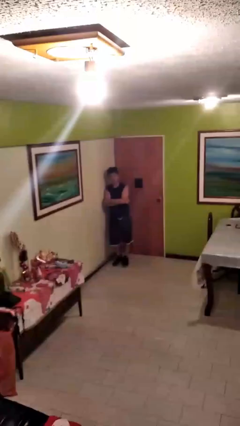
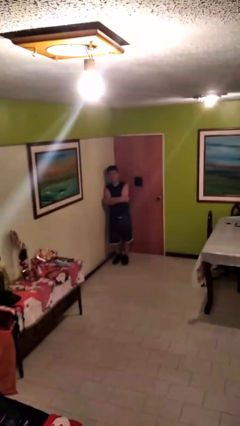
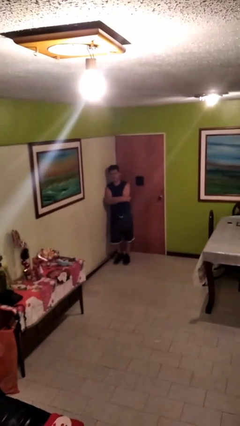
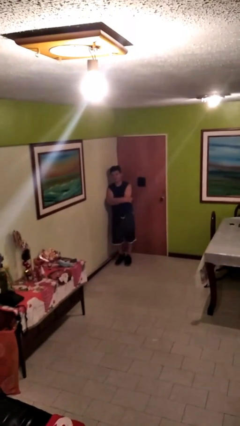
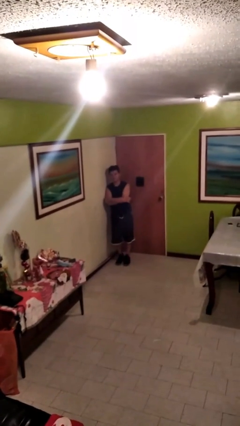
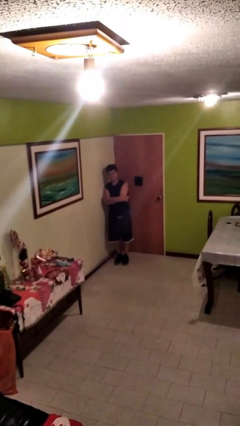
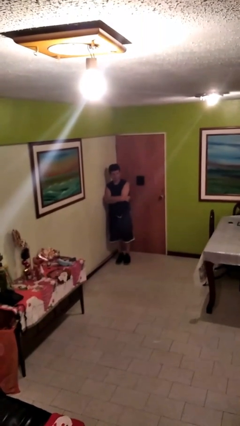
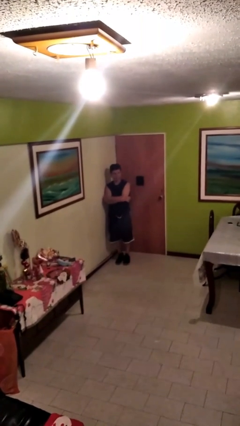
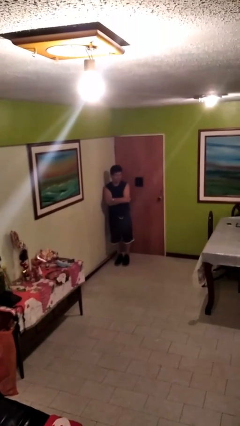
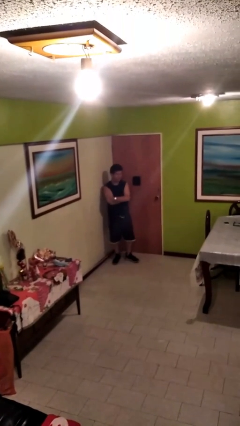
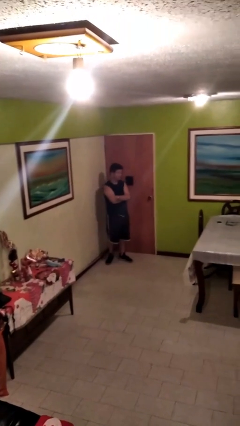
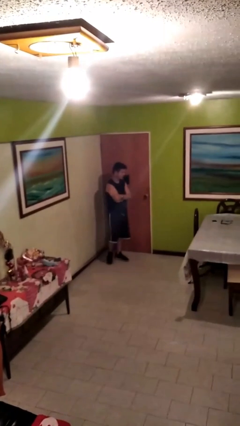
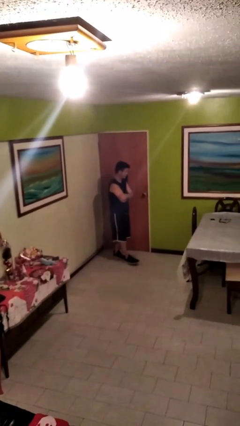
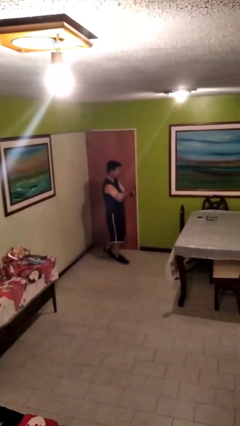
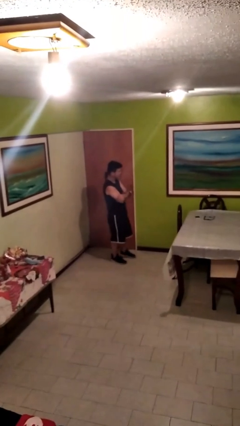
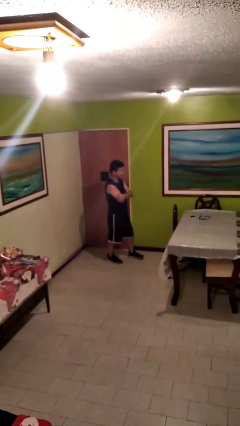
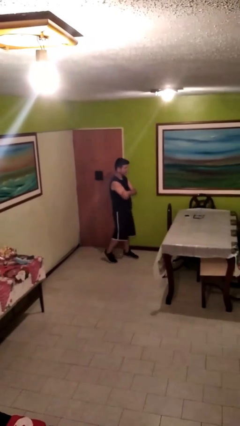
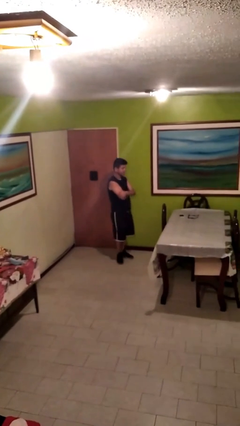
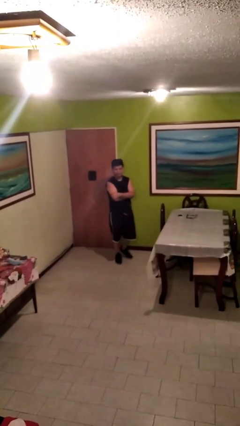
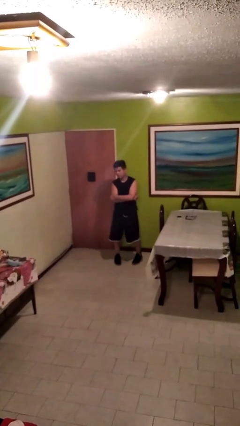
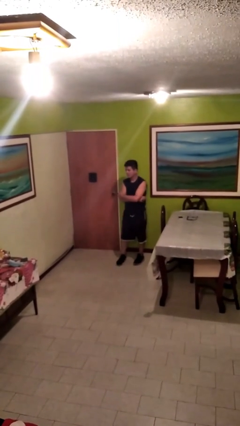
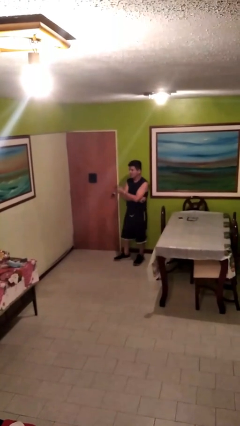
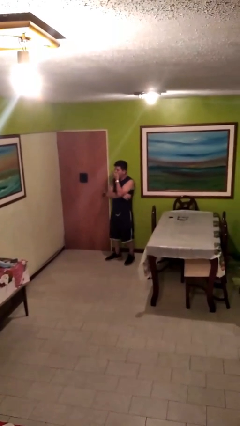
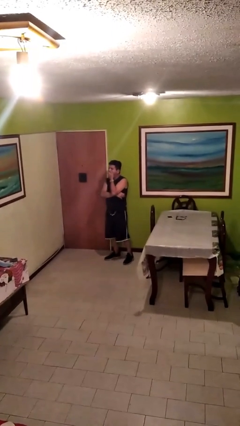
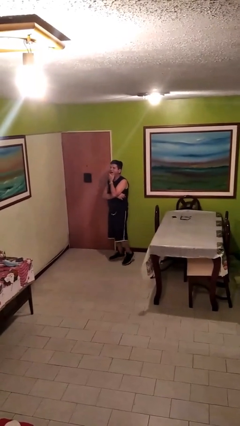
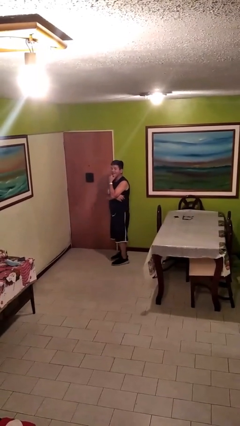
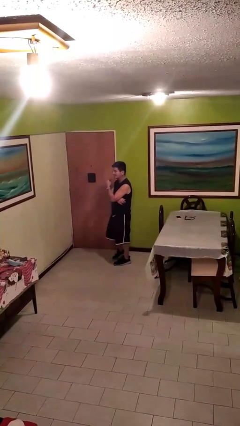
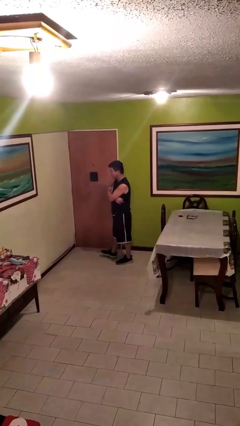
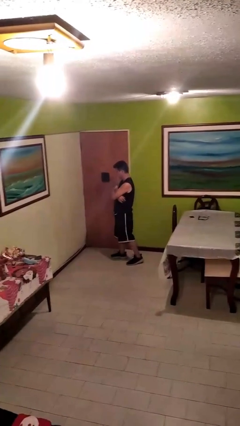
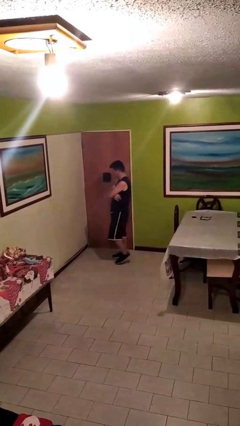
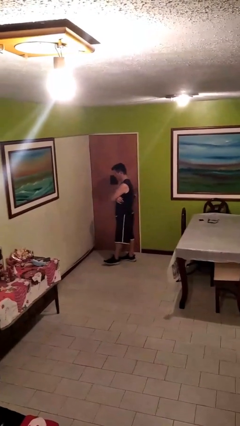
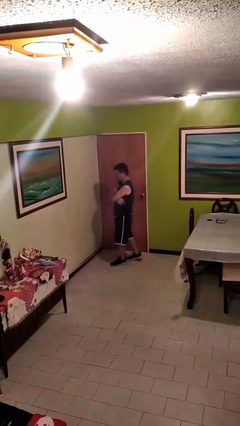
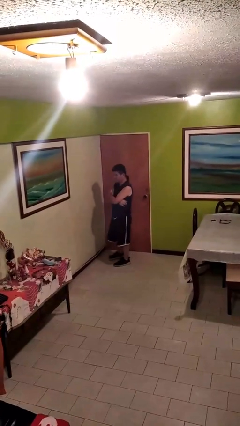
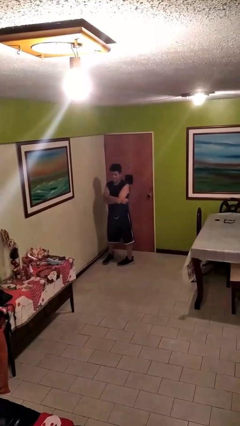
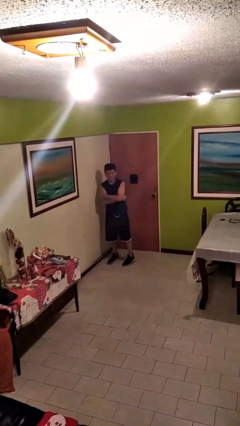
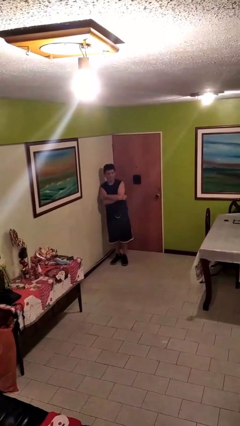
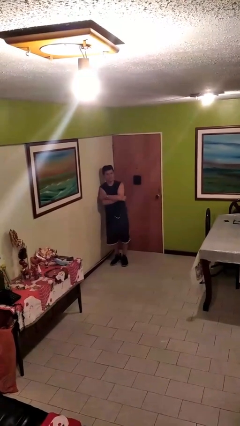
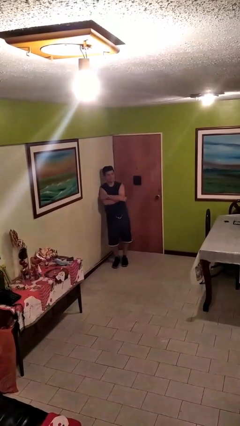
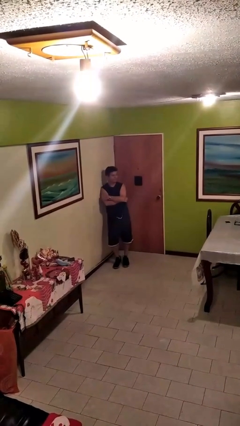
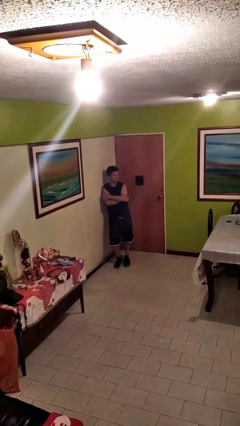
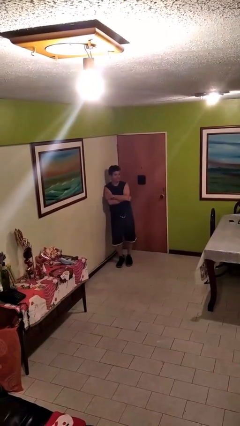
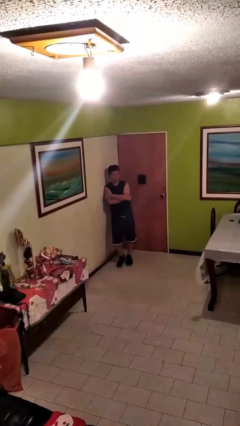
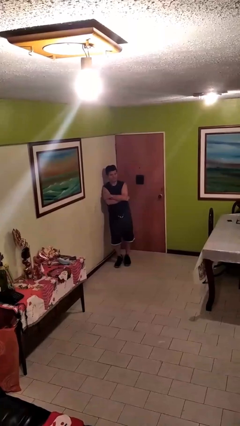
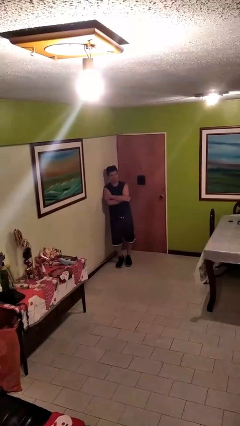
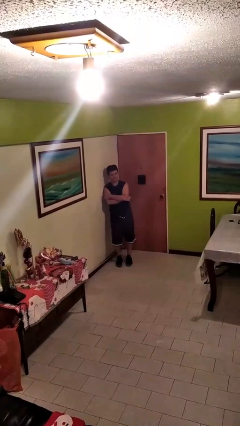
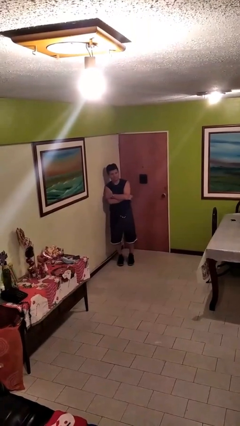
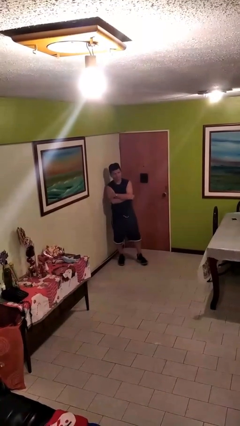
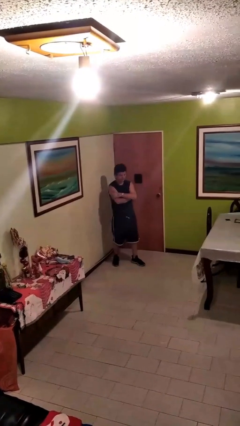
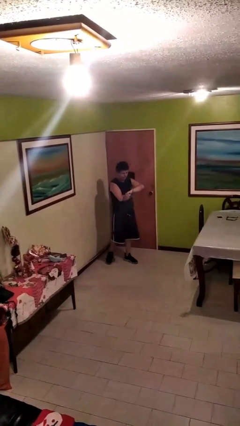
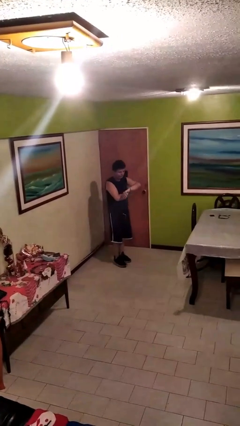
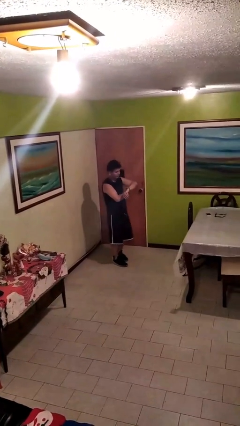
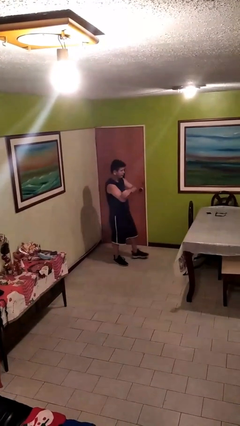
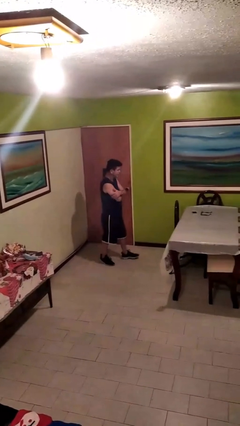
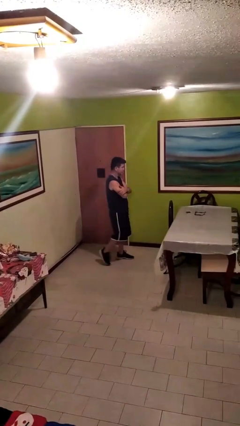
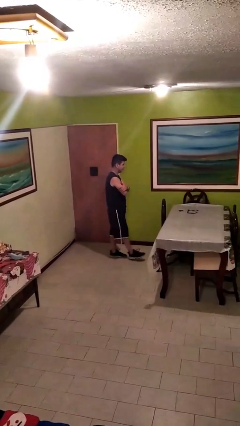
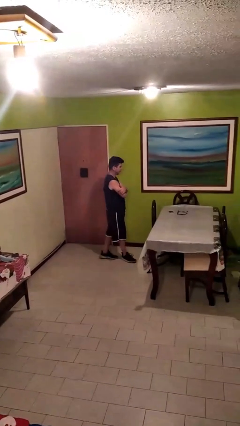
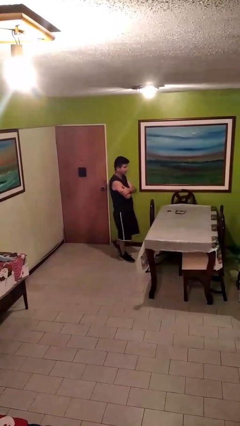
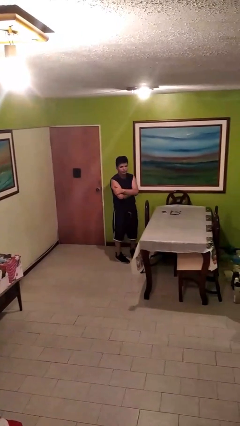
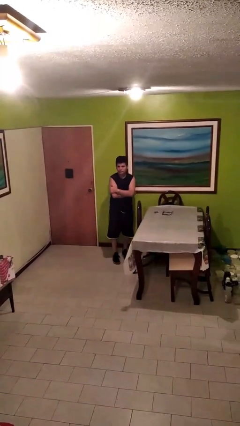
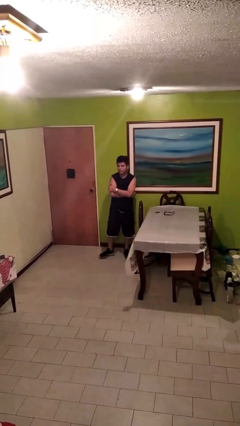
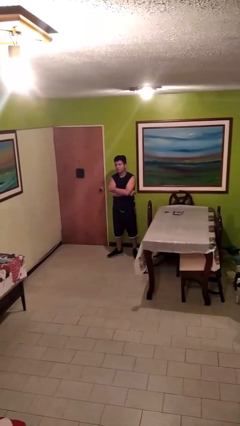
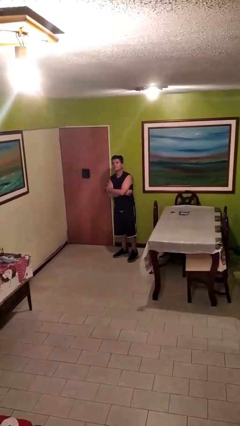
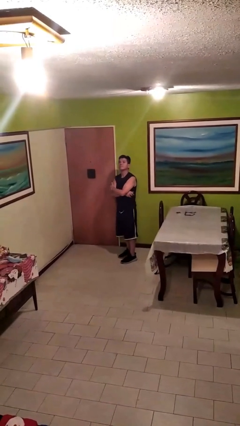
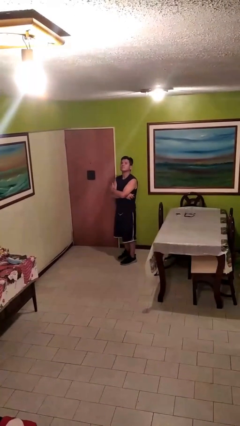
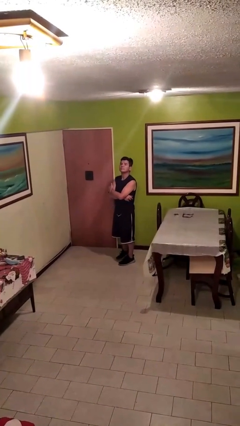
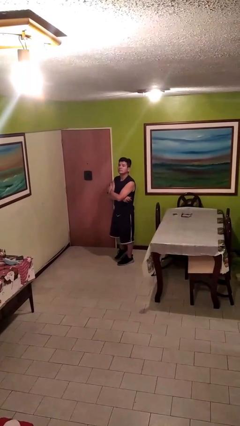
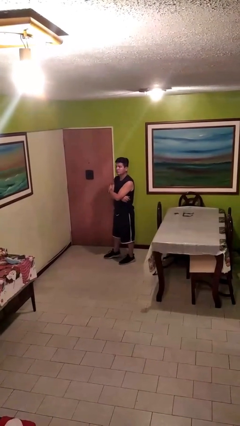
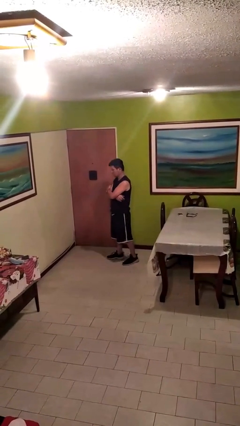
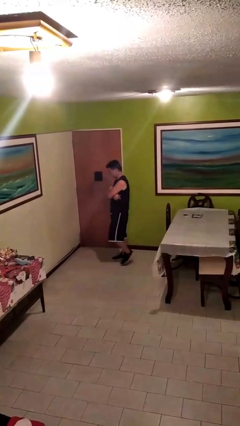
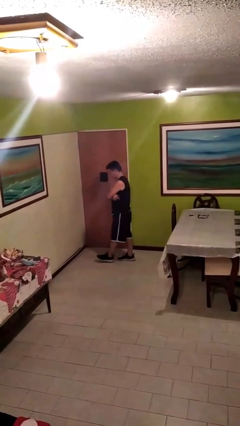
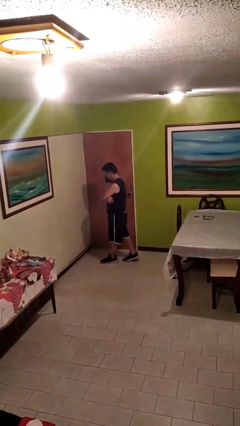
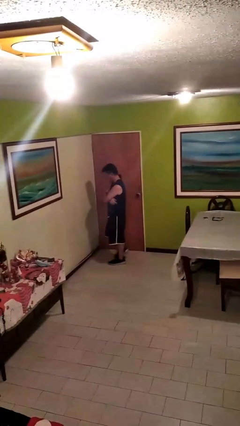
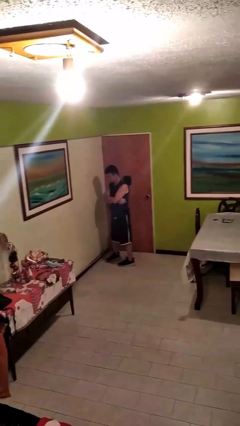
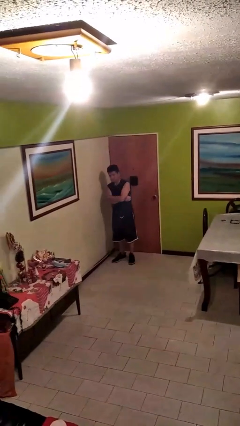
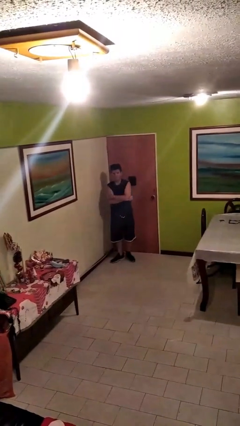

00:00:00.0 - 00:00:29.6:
person walks

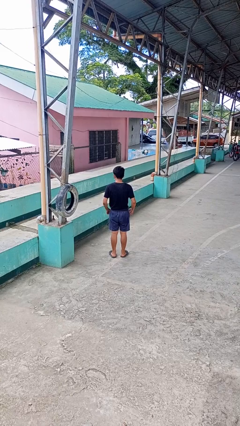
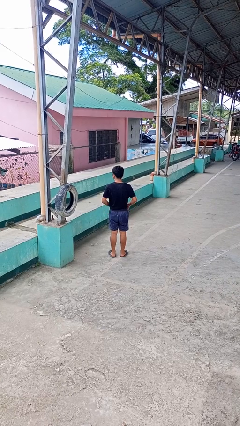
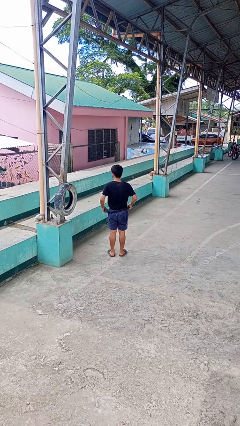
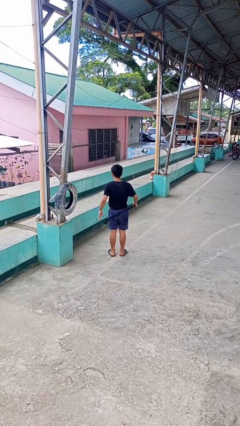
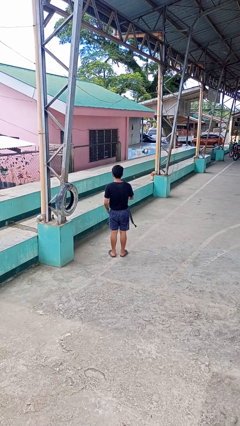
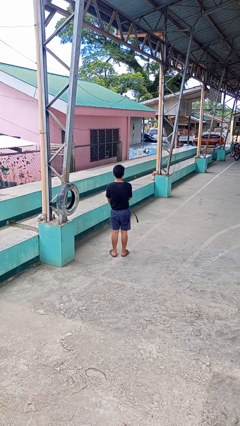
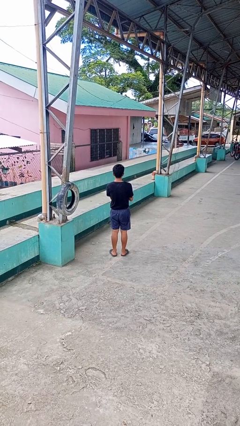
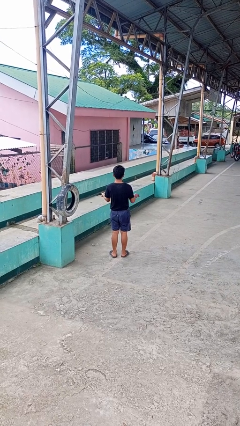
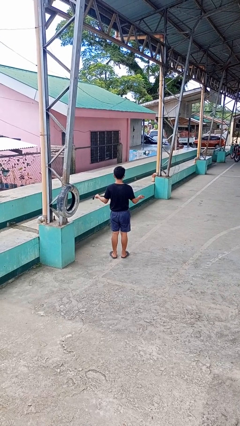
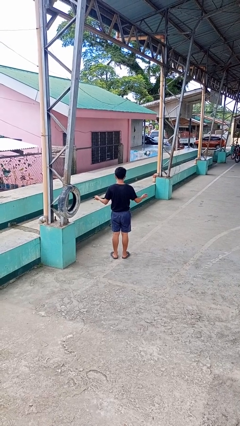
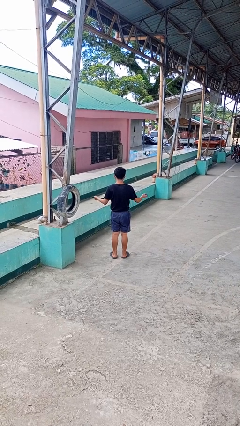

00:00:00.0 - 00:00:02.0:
person takes off belt

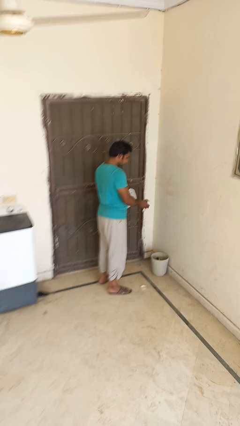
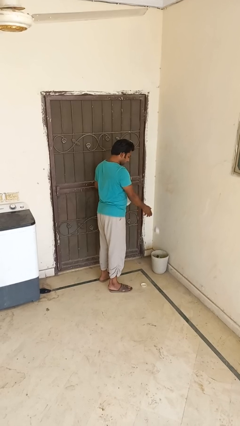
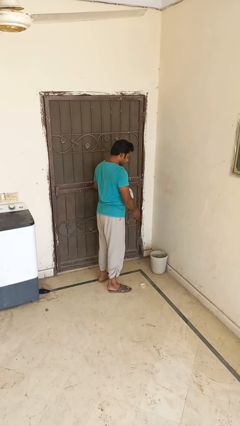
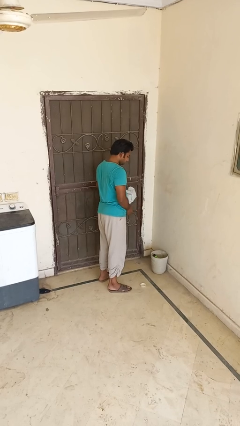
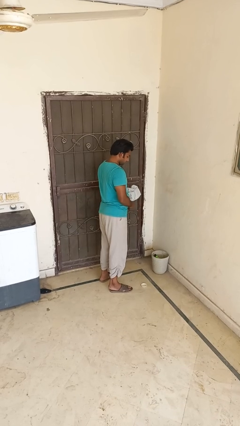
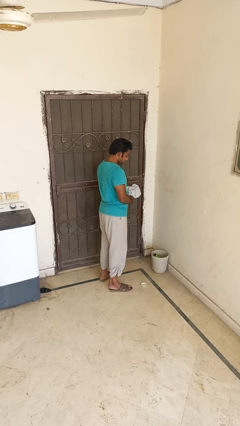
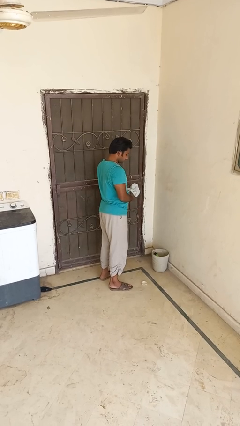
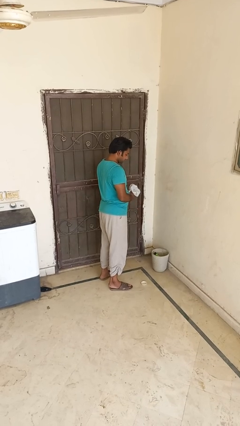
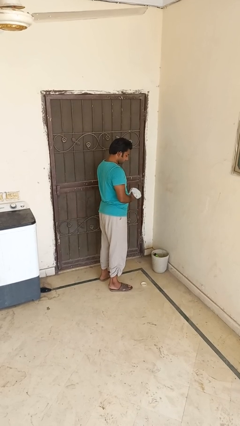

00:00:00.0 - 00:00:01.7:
person discards trash
